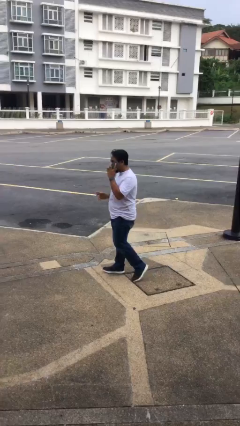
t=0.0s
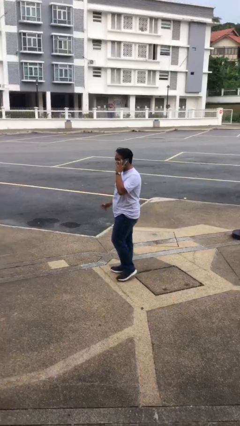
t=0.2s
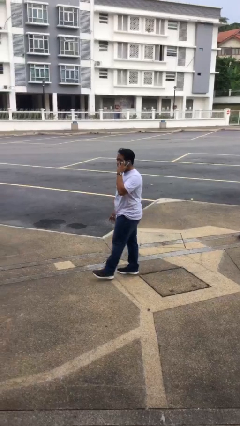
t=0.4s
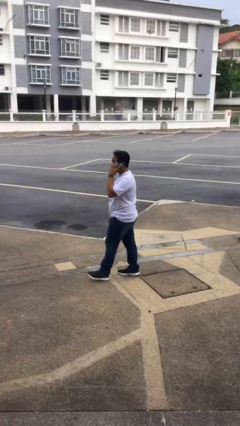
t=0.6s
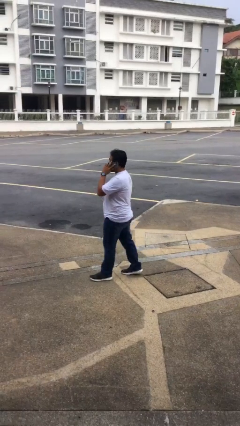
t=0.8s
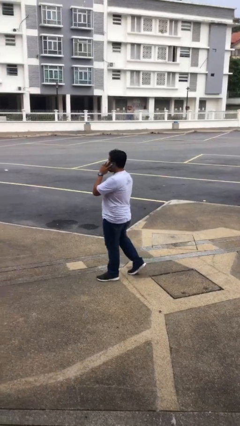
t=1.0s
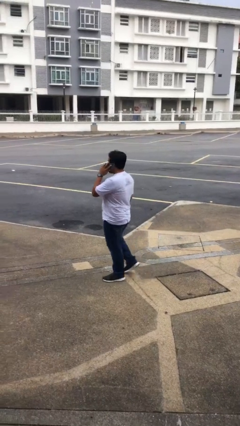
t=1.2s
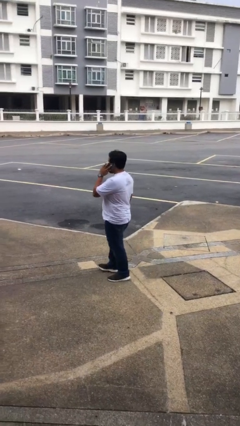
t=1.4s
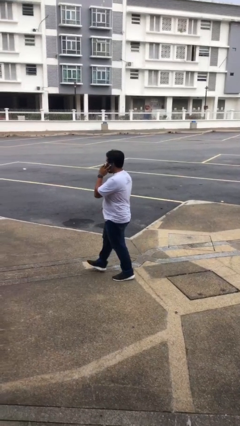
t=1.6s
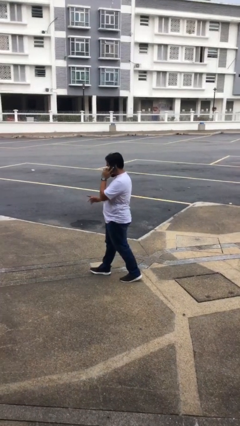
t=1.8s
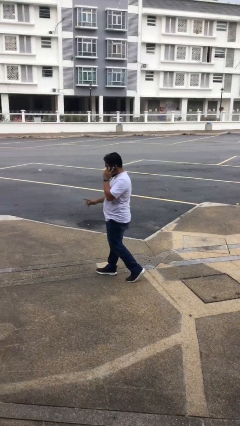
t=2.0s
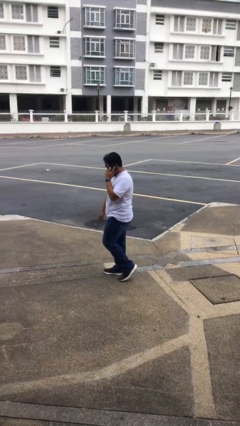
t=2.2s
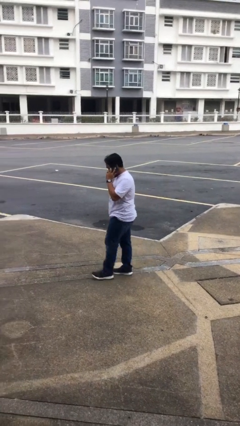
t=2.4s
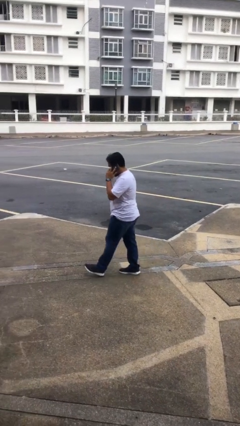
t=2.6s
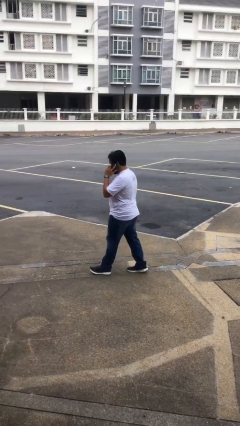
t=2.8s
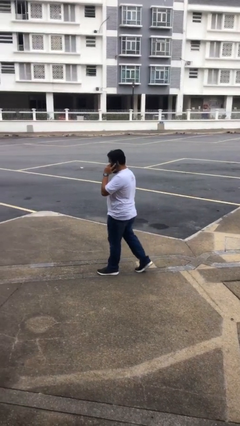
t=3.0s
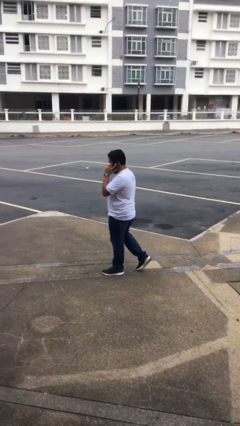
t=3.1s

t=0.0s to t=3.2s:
person talks on phone

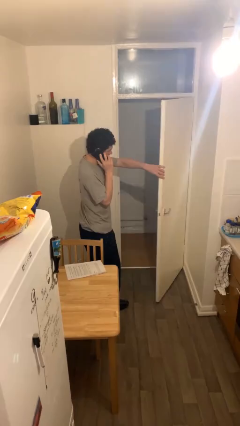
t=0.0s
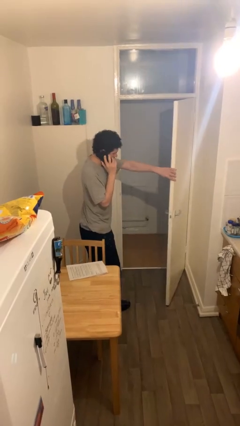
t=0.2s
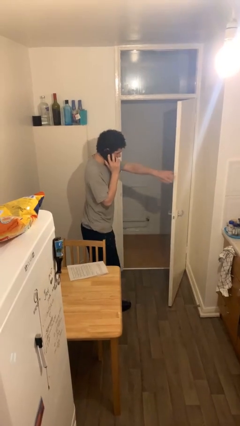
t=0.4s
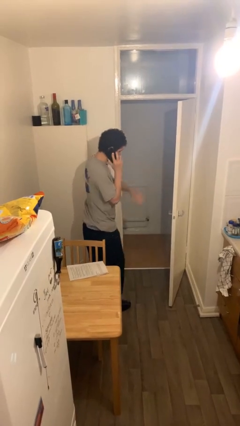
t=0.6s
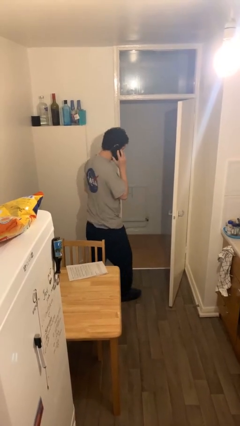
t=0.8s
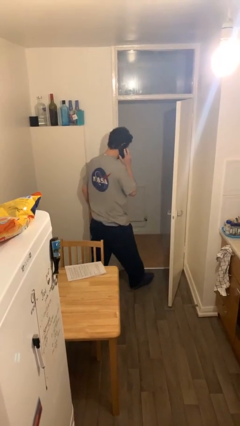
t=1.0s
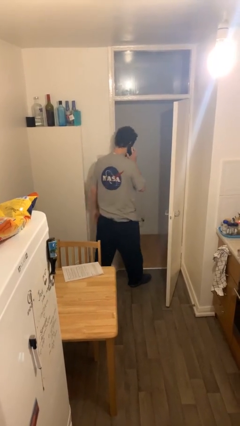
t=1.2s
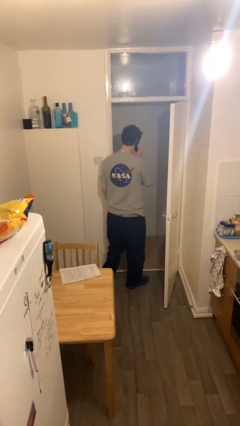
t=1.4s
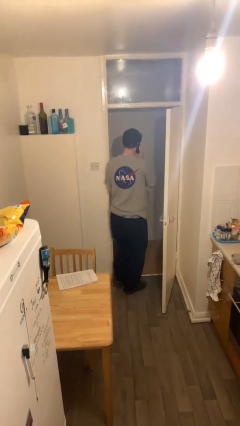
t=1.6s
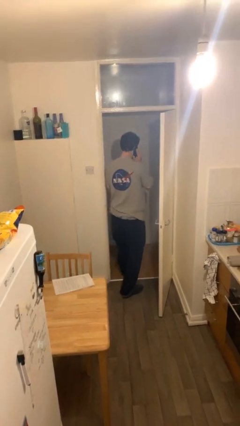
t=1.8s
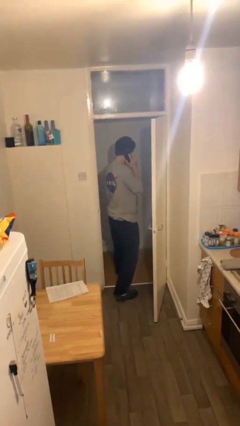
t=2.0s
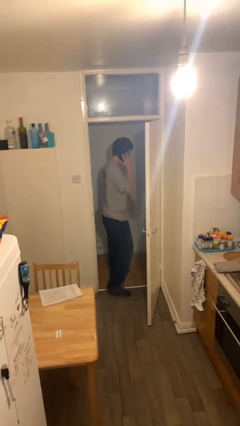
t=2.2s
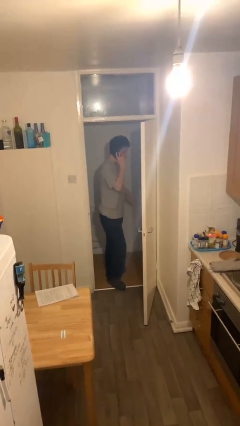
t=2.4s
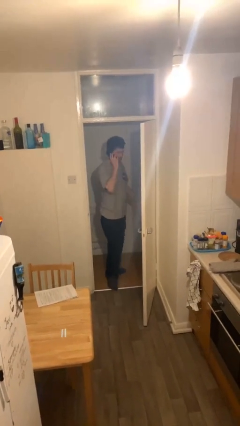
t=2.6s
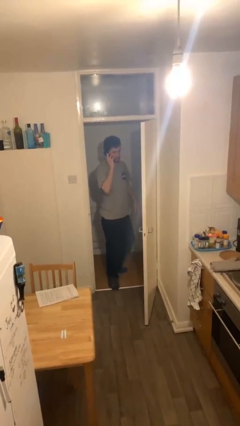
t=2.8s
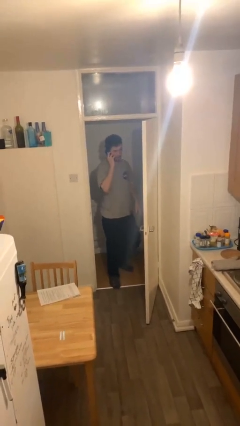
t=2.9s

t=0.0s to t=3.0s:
person exits scene through structure

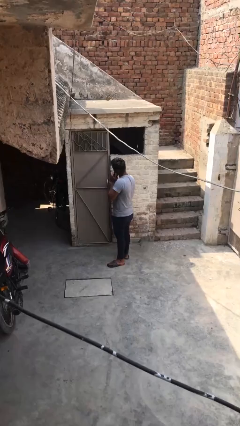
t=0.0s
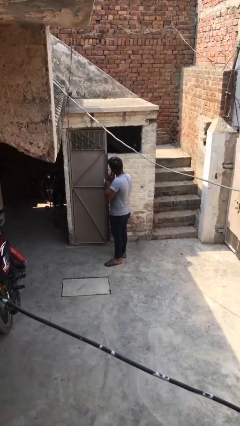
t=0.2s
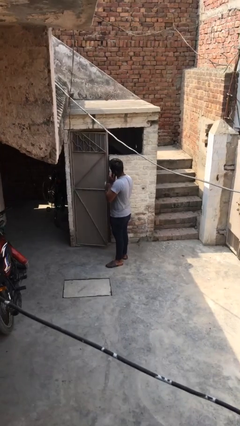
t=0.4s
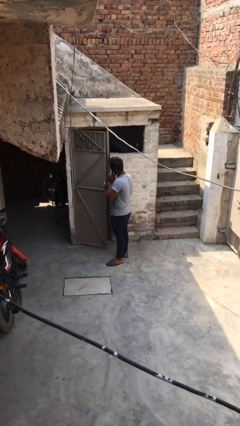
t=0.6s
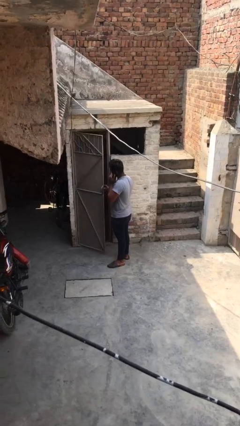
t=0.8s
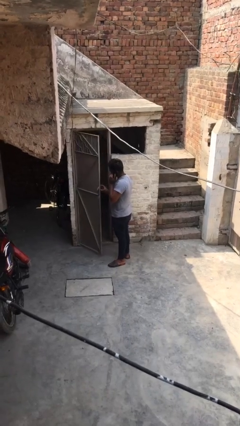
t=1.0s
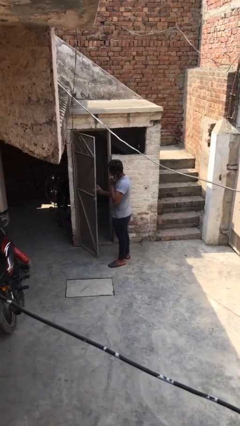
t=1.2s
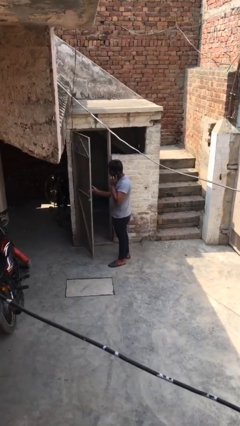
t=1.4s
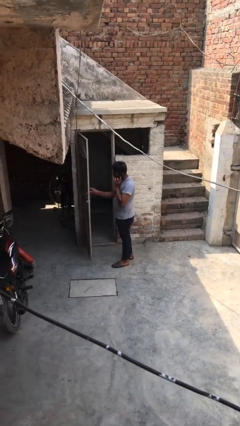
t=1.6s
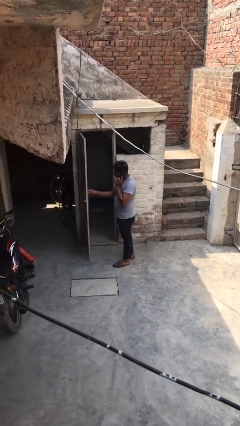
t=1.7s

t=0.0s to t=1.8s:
person opens facility door

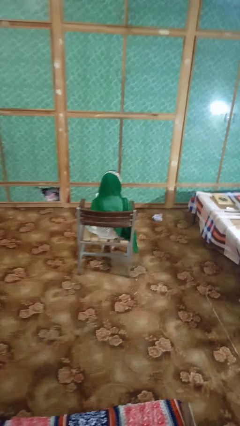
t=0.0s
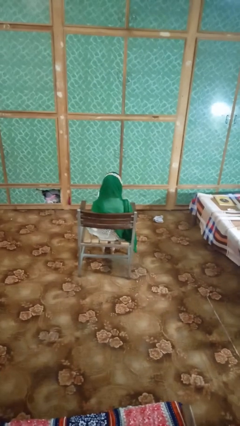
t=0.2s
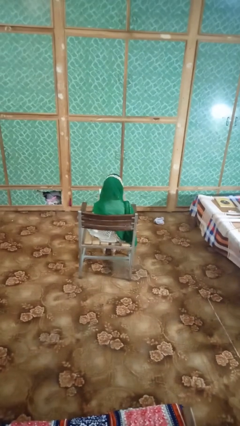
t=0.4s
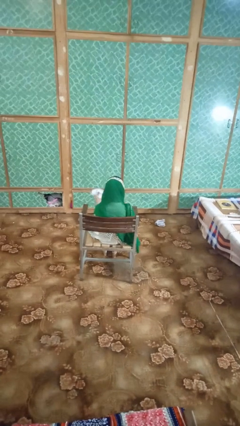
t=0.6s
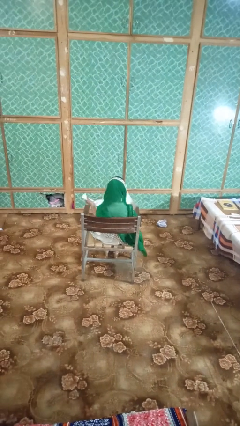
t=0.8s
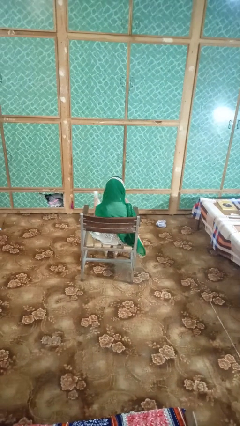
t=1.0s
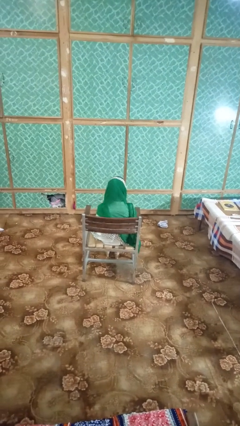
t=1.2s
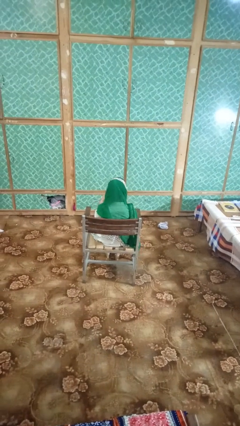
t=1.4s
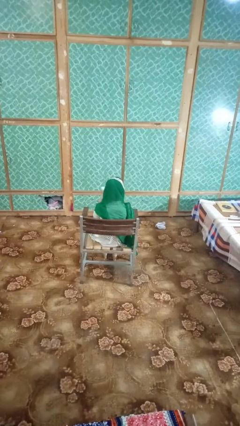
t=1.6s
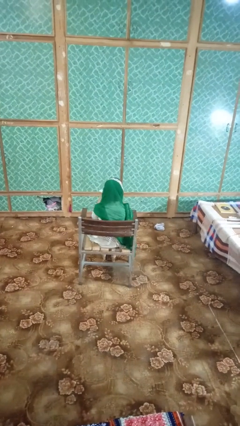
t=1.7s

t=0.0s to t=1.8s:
person tears paper

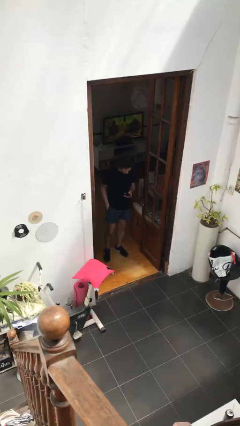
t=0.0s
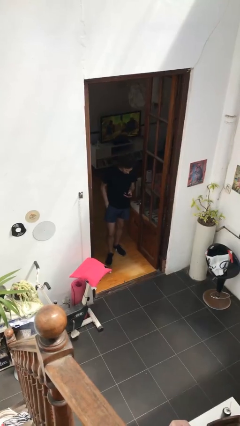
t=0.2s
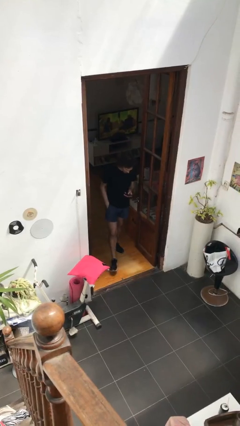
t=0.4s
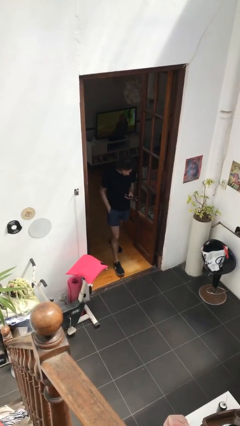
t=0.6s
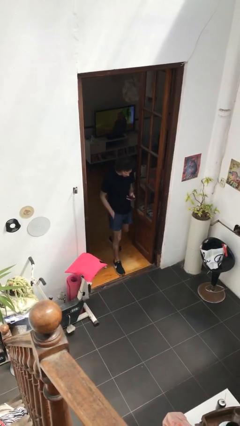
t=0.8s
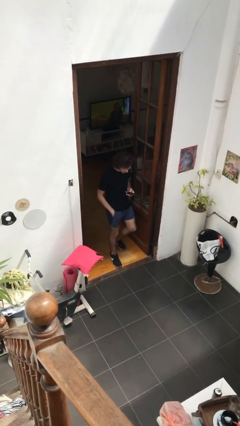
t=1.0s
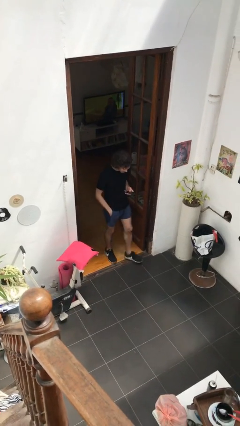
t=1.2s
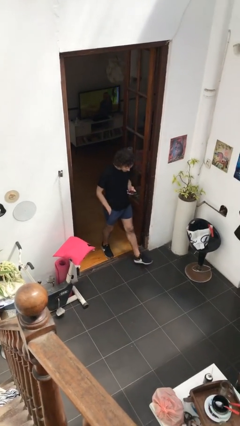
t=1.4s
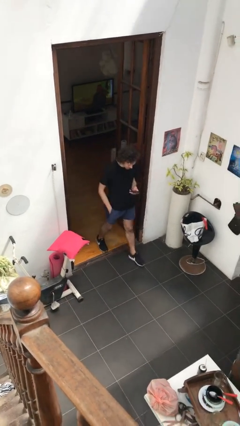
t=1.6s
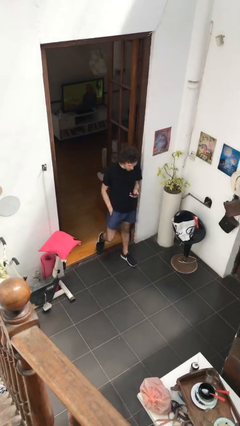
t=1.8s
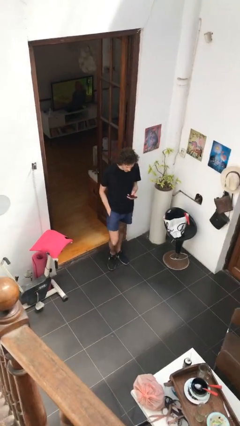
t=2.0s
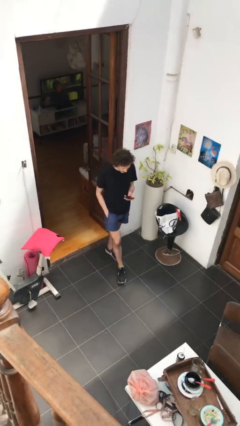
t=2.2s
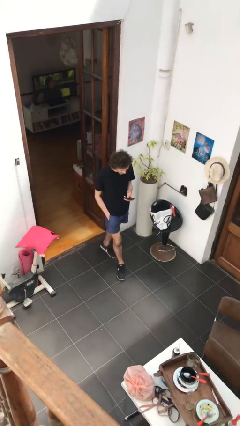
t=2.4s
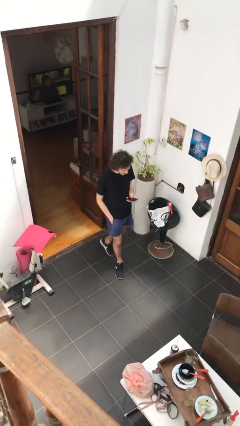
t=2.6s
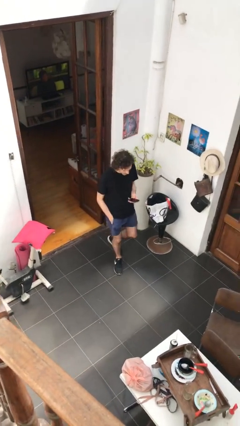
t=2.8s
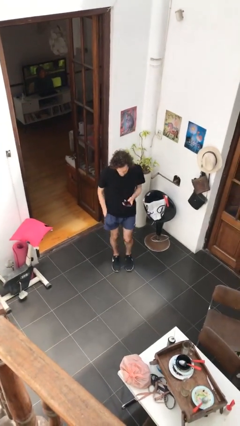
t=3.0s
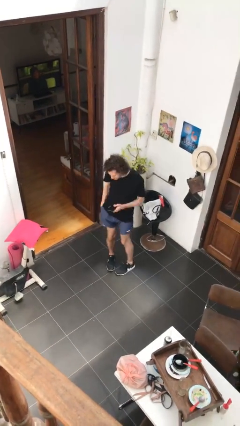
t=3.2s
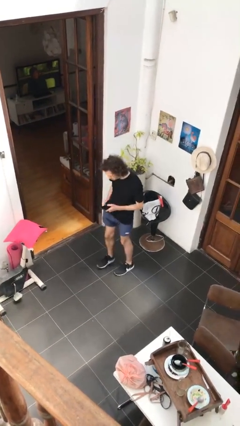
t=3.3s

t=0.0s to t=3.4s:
person enters scene through structure

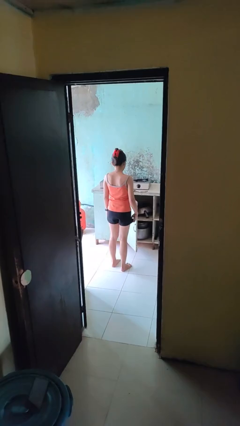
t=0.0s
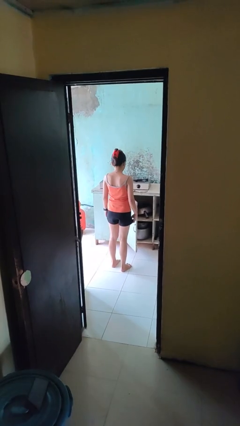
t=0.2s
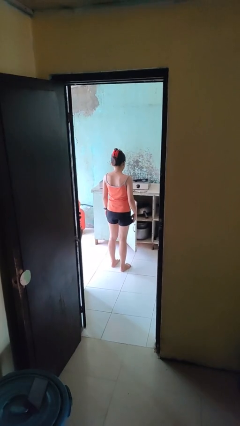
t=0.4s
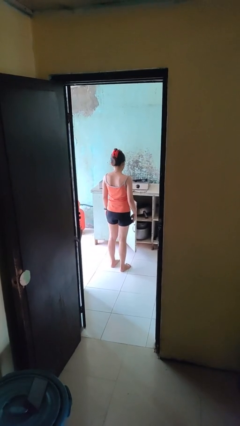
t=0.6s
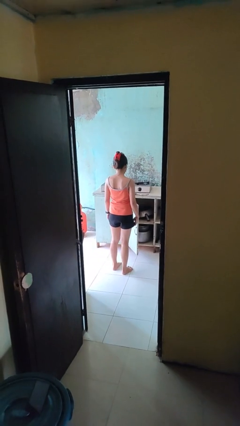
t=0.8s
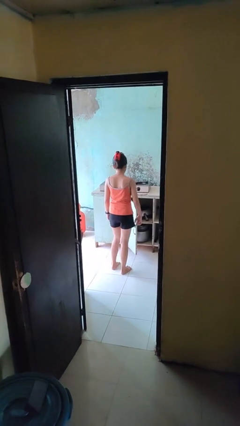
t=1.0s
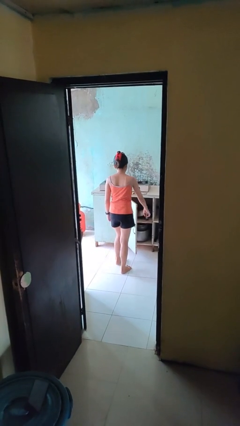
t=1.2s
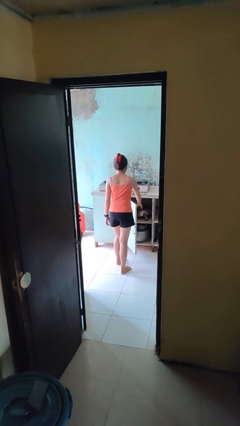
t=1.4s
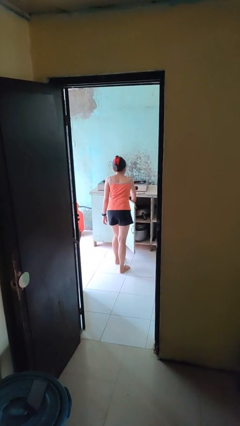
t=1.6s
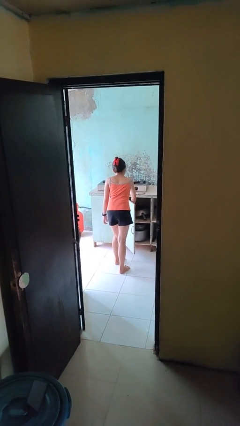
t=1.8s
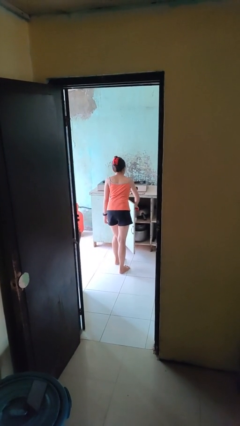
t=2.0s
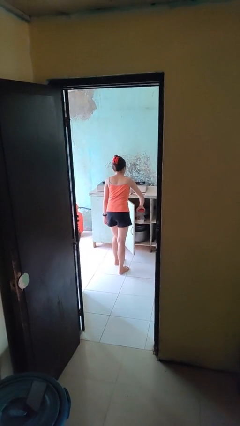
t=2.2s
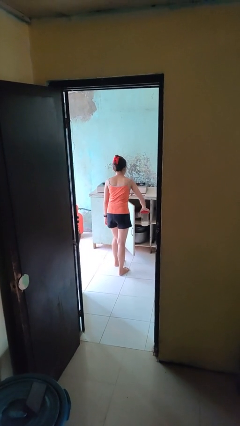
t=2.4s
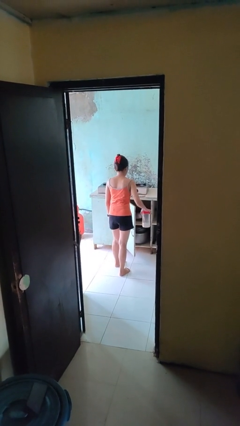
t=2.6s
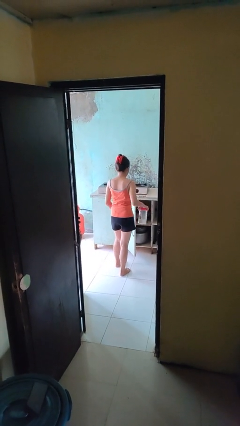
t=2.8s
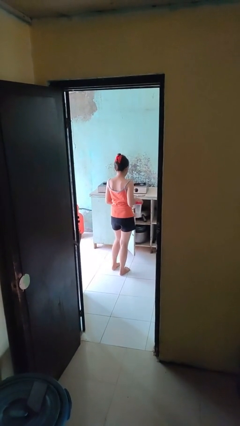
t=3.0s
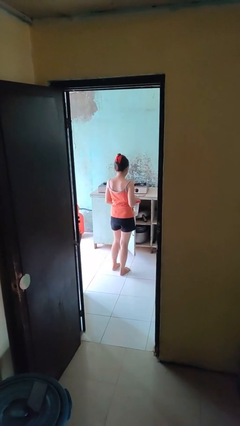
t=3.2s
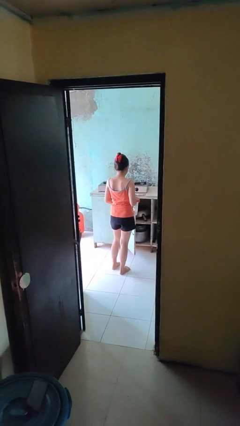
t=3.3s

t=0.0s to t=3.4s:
person picks up object from cabinet

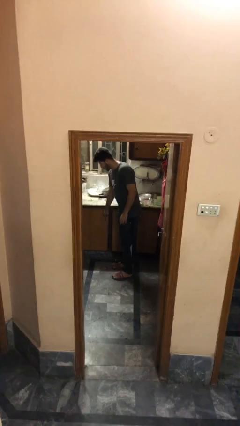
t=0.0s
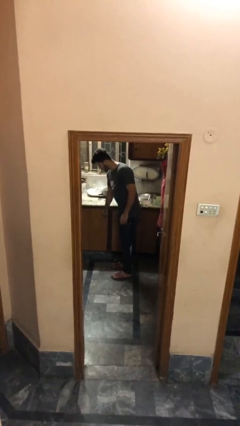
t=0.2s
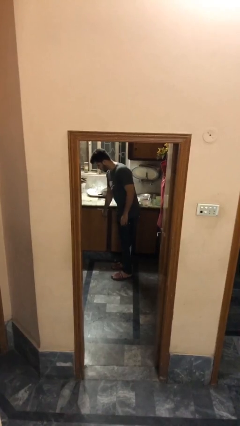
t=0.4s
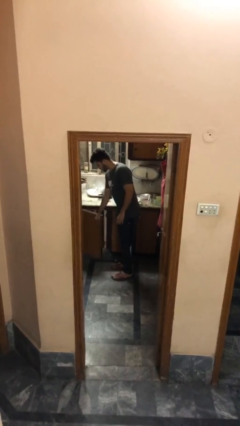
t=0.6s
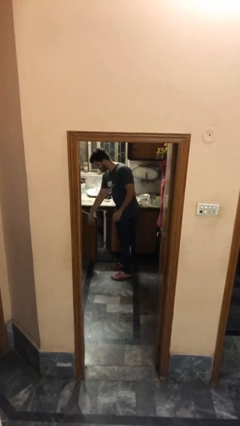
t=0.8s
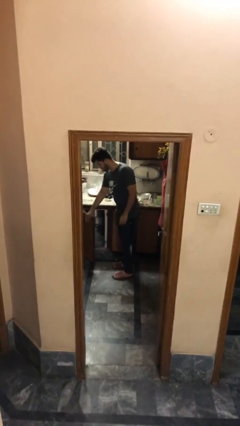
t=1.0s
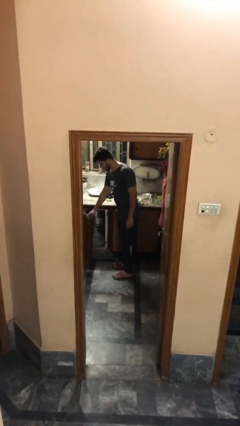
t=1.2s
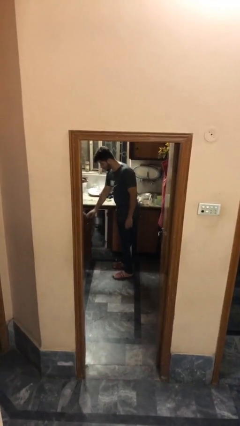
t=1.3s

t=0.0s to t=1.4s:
person opens cabinet
